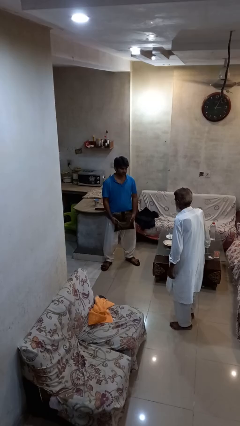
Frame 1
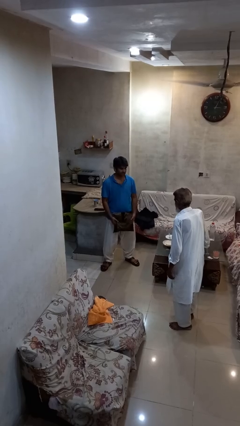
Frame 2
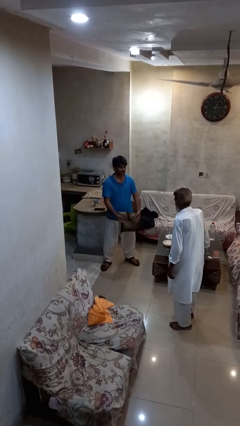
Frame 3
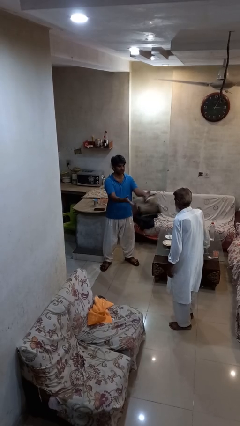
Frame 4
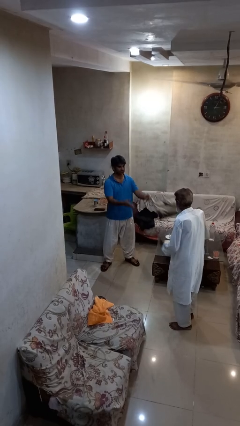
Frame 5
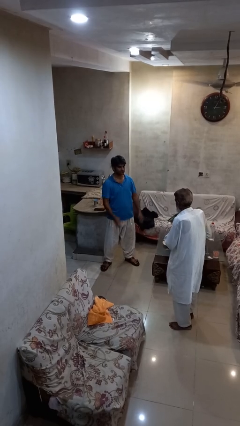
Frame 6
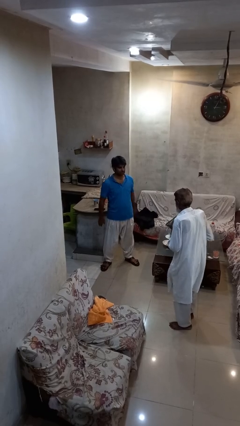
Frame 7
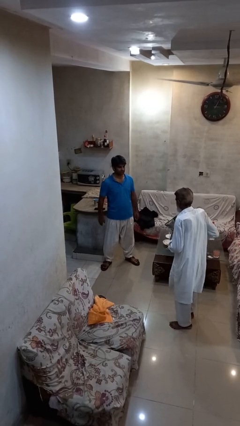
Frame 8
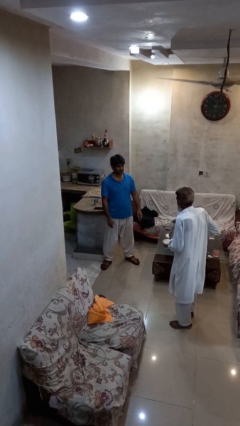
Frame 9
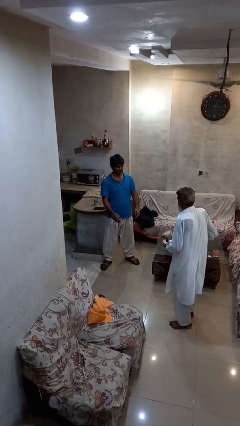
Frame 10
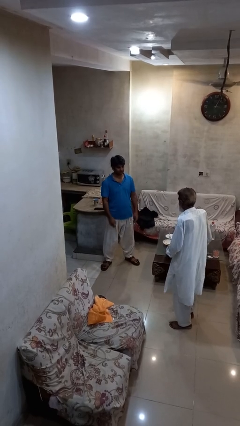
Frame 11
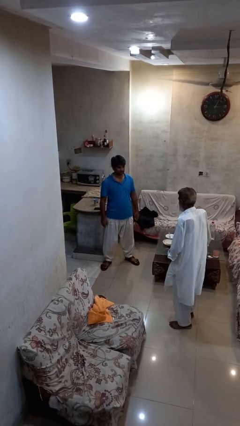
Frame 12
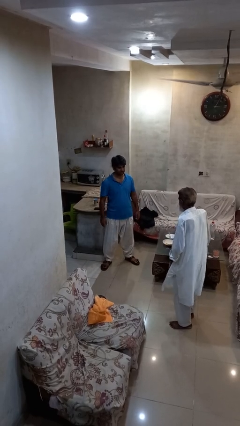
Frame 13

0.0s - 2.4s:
person throws object to person

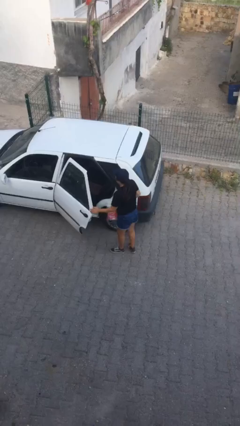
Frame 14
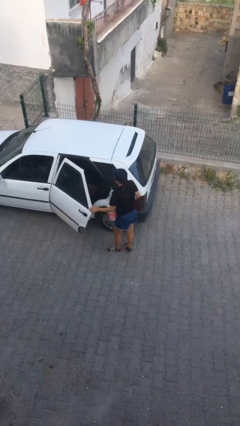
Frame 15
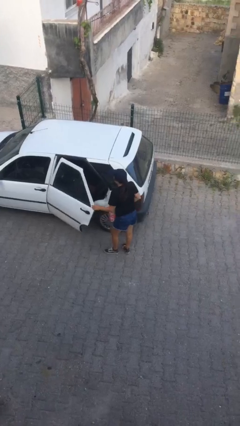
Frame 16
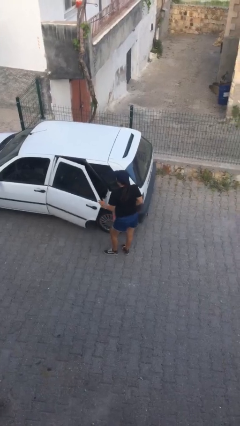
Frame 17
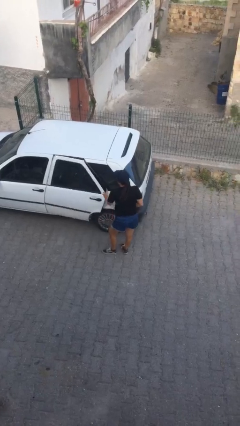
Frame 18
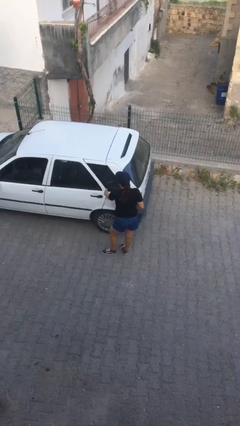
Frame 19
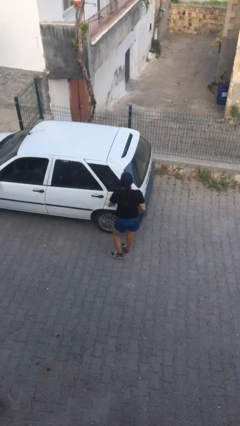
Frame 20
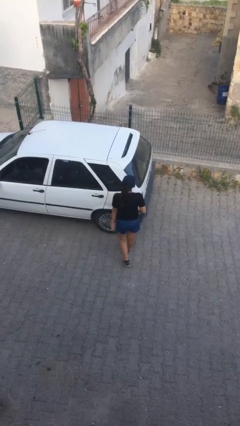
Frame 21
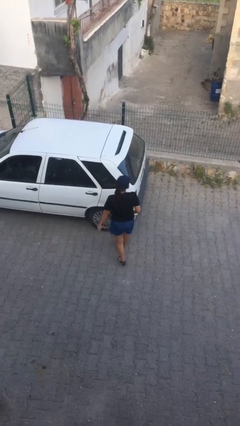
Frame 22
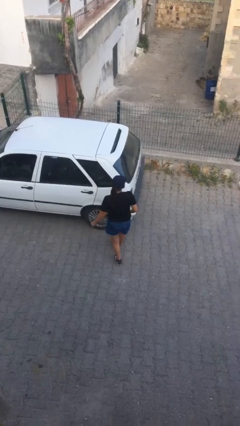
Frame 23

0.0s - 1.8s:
person closes car door

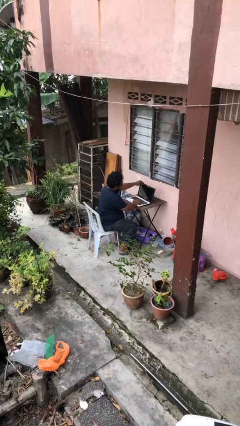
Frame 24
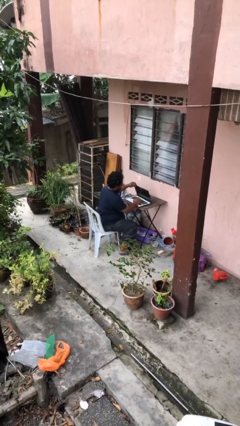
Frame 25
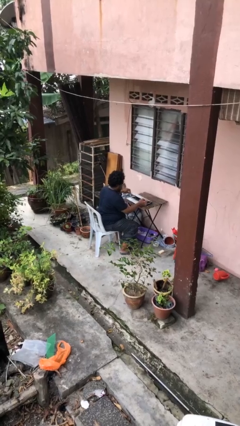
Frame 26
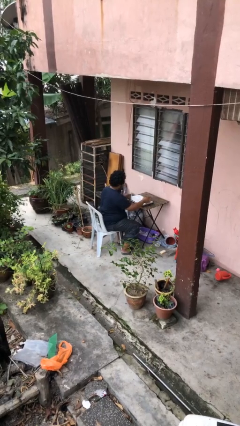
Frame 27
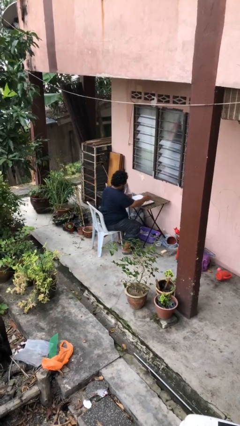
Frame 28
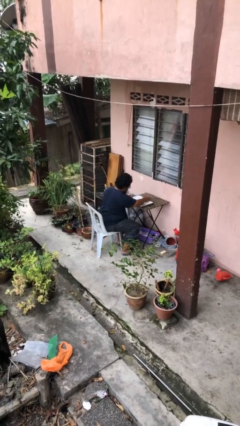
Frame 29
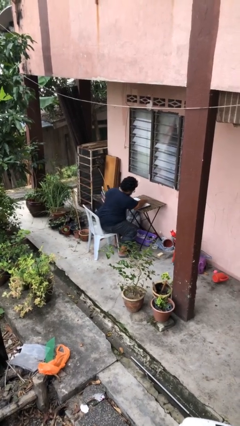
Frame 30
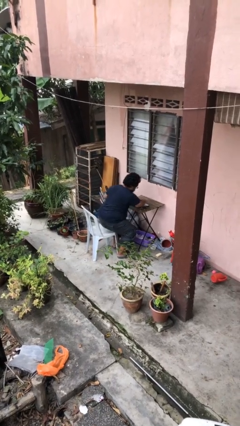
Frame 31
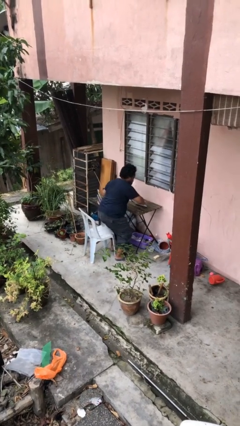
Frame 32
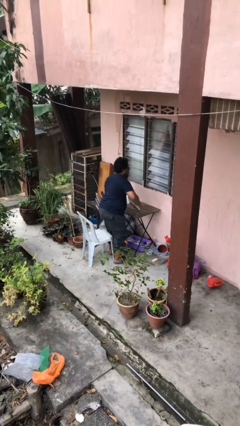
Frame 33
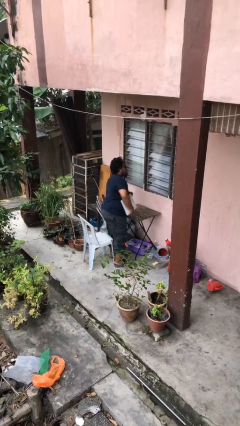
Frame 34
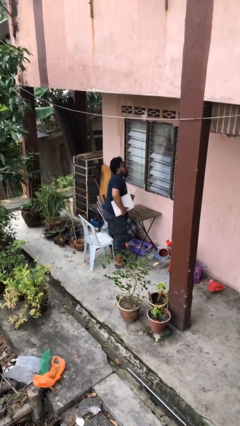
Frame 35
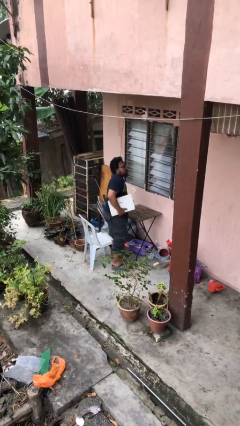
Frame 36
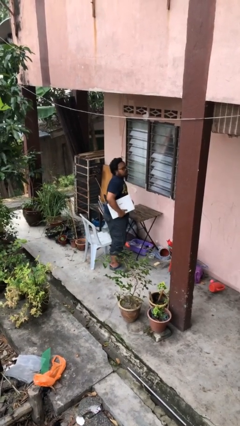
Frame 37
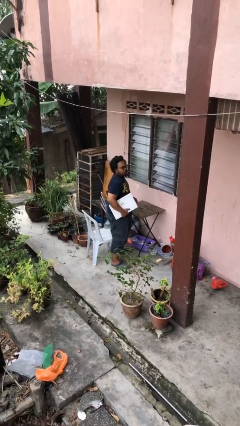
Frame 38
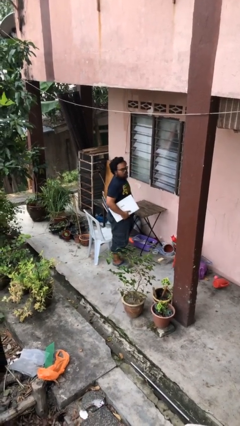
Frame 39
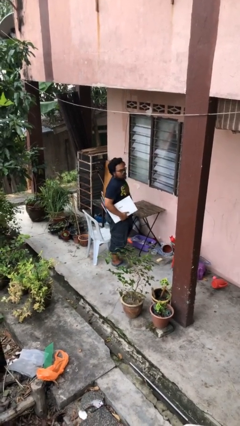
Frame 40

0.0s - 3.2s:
person stands up

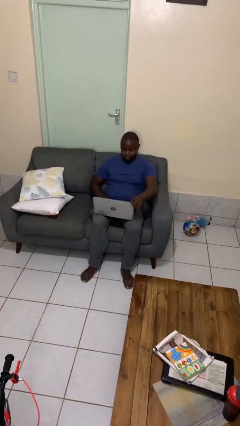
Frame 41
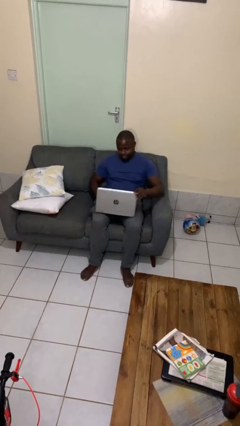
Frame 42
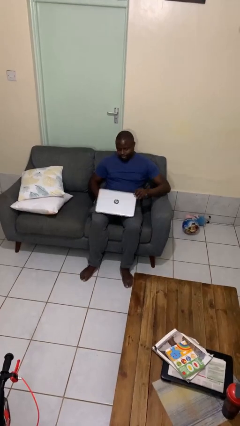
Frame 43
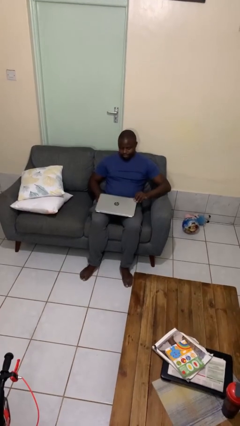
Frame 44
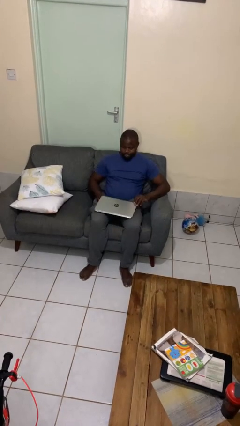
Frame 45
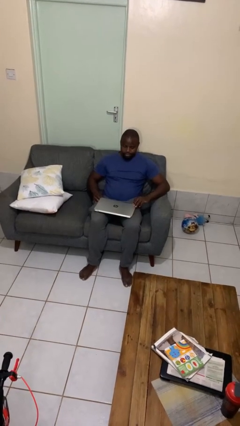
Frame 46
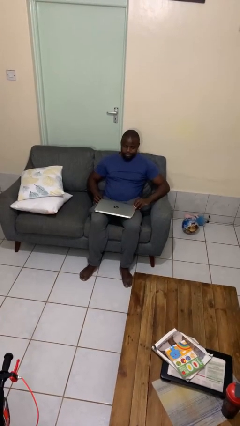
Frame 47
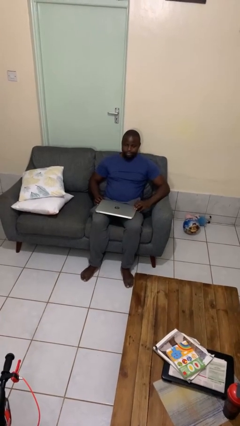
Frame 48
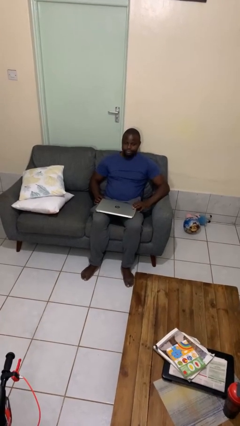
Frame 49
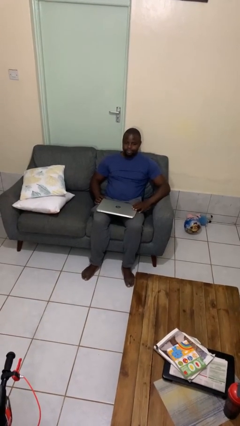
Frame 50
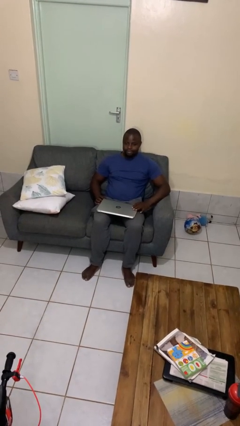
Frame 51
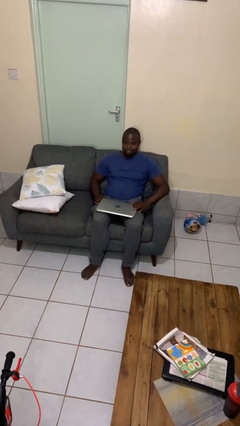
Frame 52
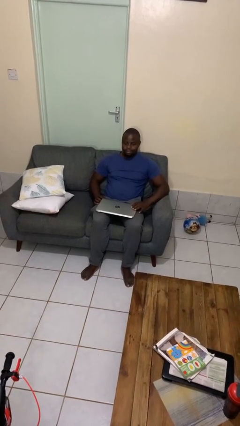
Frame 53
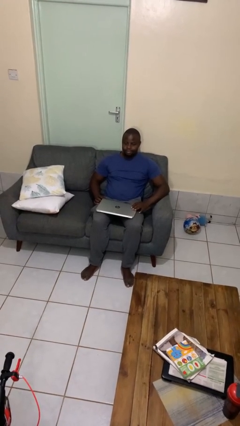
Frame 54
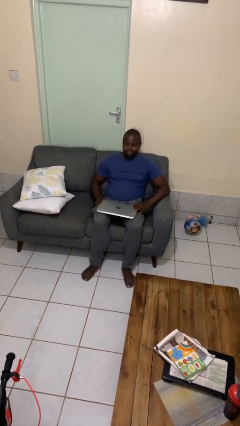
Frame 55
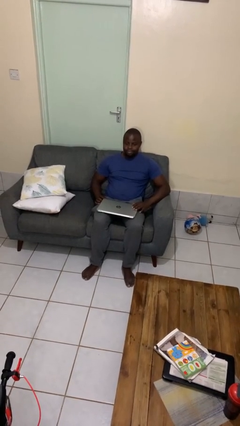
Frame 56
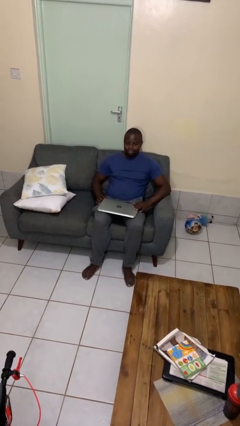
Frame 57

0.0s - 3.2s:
person closes laptop

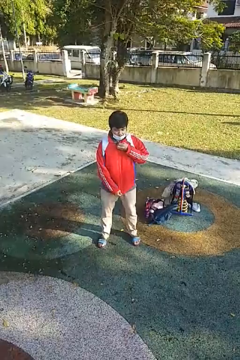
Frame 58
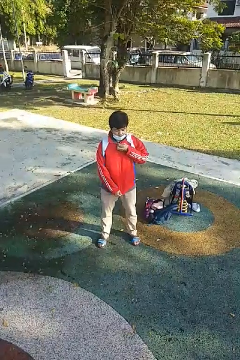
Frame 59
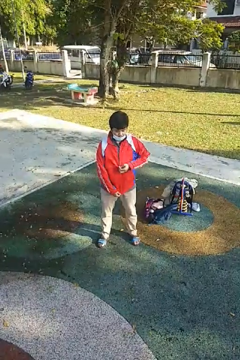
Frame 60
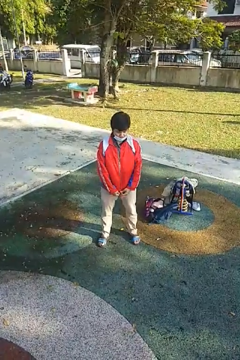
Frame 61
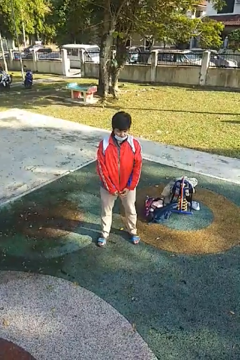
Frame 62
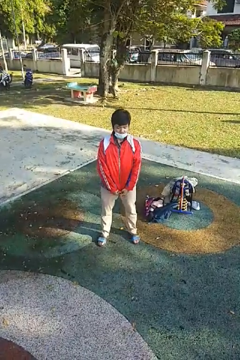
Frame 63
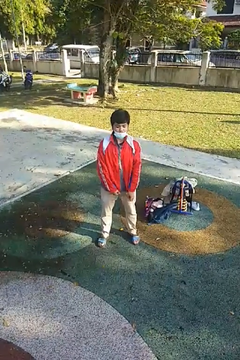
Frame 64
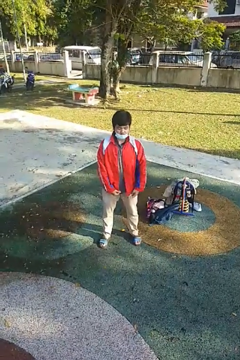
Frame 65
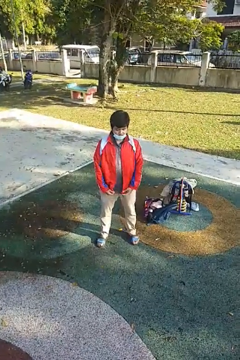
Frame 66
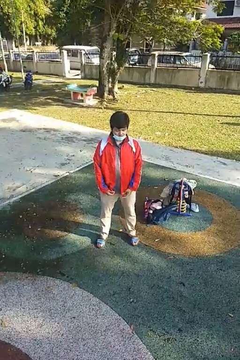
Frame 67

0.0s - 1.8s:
person unzips jacket

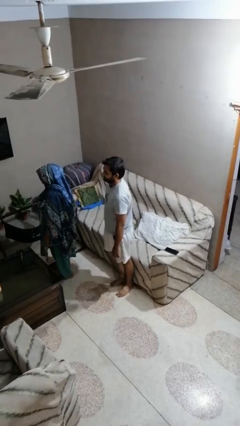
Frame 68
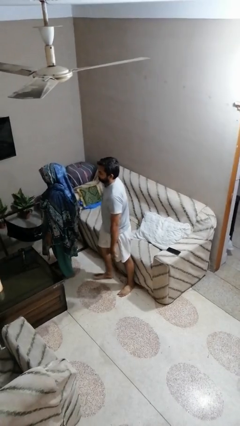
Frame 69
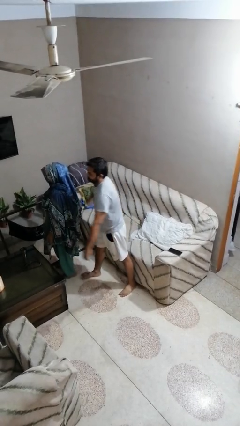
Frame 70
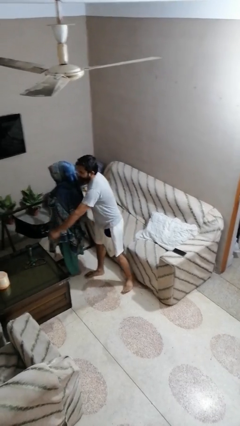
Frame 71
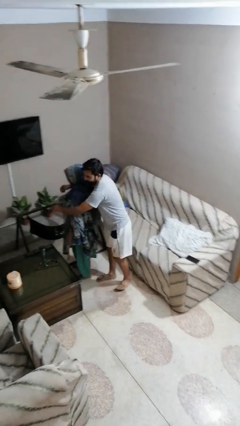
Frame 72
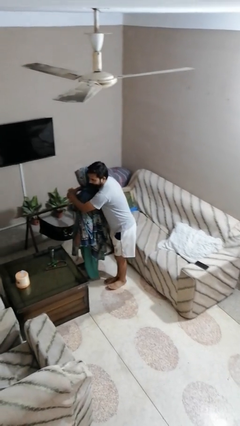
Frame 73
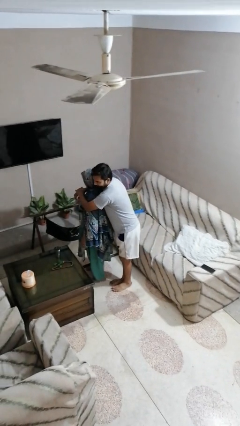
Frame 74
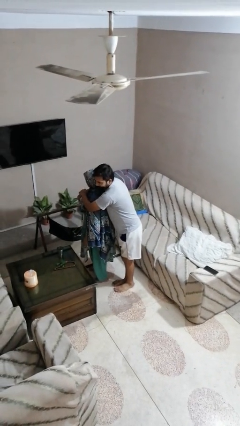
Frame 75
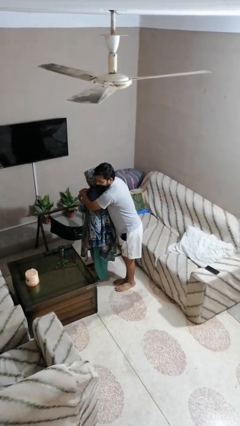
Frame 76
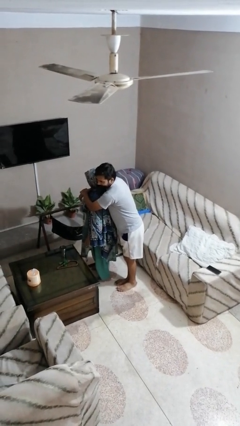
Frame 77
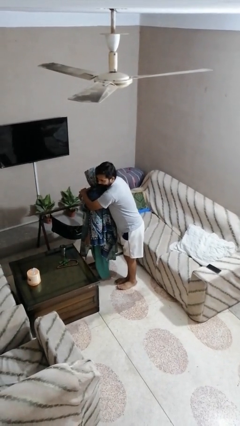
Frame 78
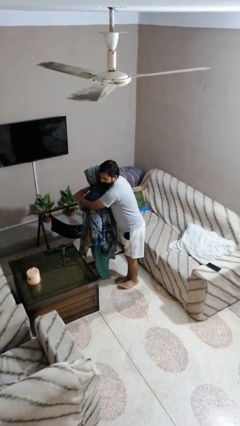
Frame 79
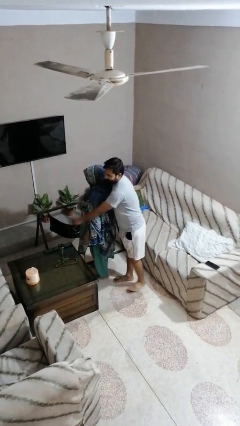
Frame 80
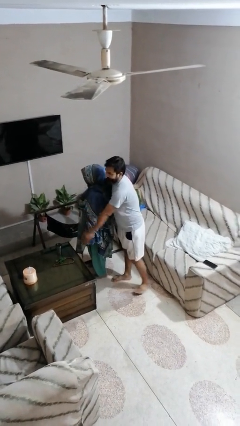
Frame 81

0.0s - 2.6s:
person hugs person from behind

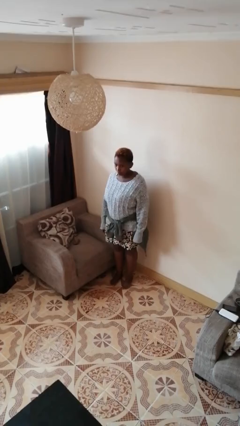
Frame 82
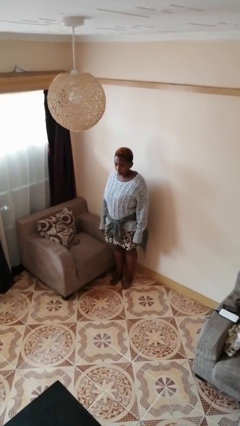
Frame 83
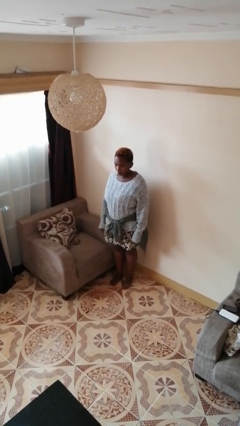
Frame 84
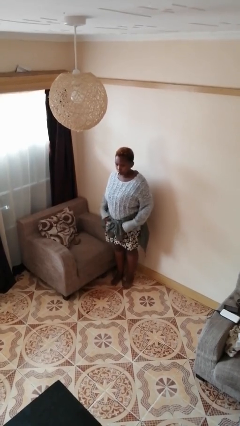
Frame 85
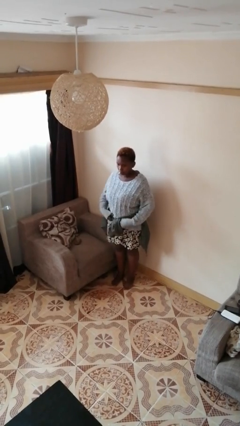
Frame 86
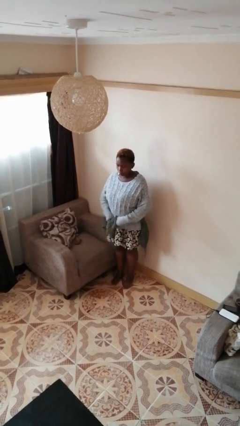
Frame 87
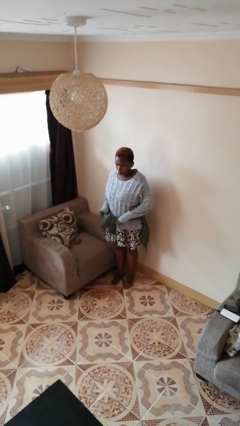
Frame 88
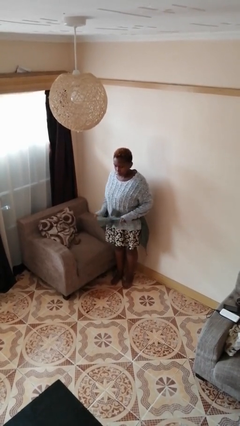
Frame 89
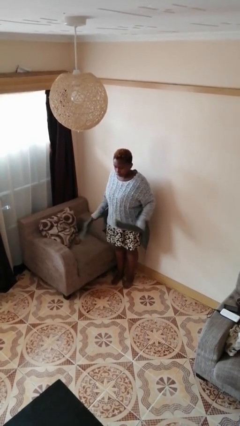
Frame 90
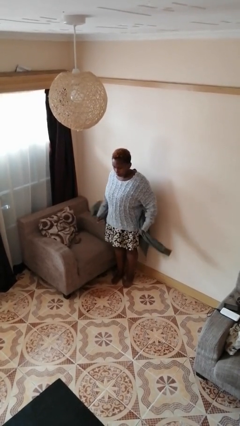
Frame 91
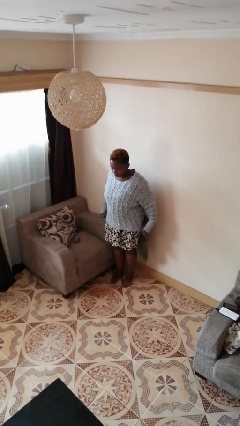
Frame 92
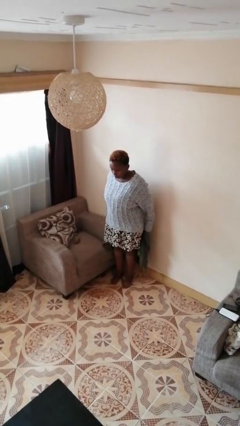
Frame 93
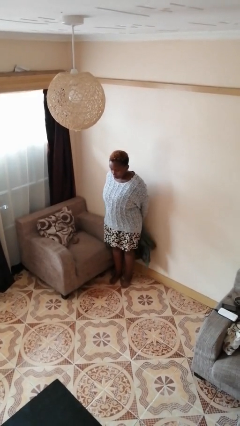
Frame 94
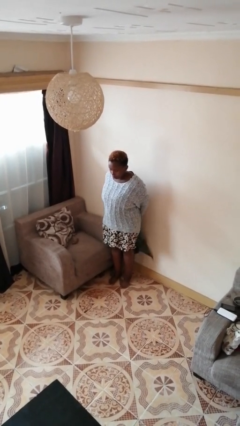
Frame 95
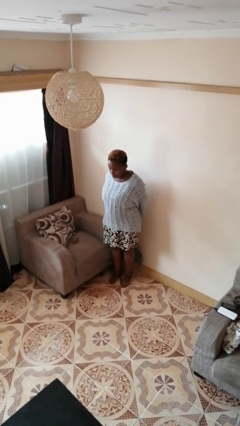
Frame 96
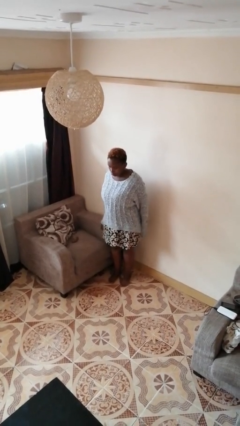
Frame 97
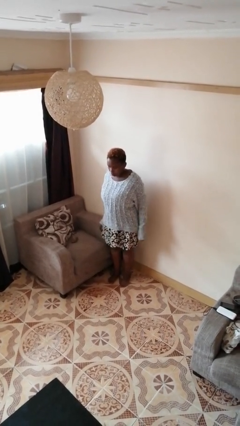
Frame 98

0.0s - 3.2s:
person unties jacket around waist
